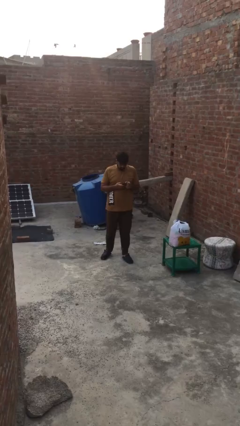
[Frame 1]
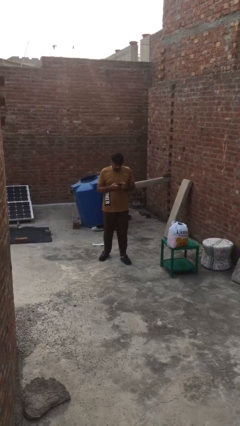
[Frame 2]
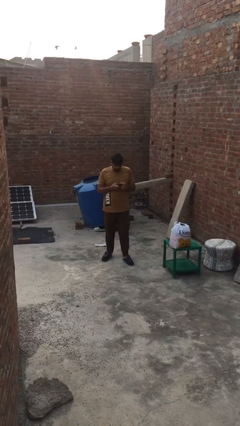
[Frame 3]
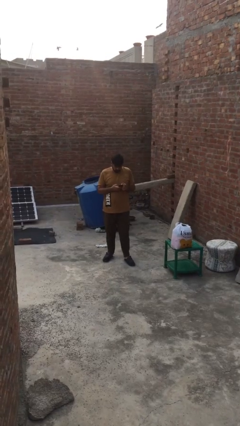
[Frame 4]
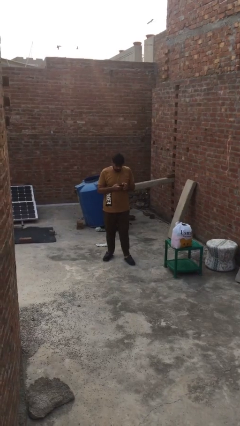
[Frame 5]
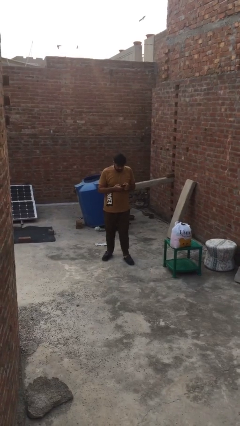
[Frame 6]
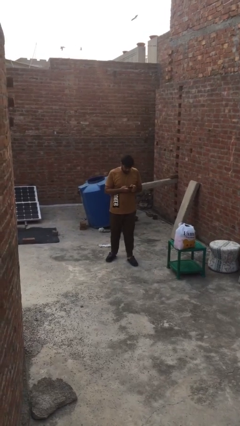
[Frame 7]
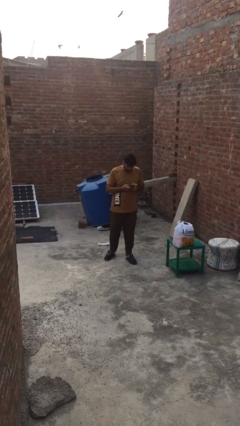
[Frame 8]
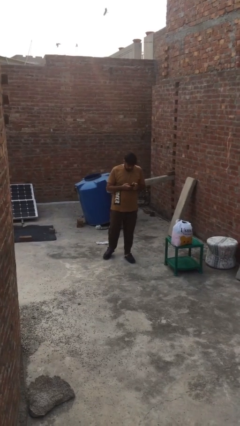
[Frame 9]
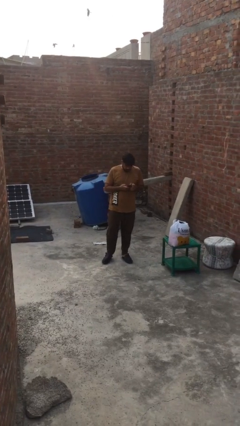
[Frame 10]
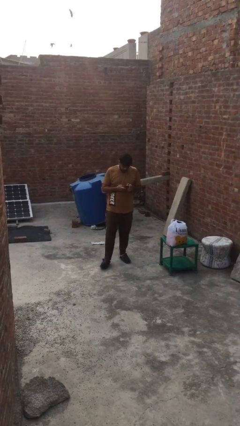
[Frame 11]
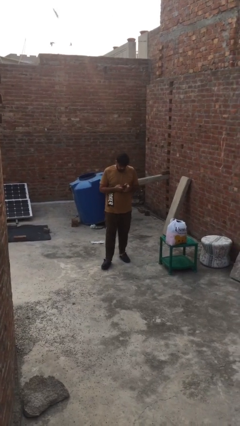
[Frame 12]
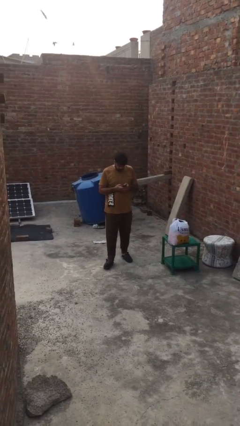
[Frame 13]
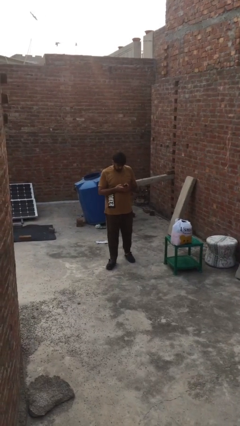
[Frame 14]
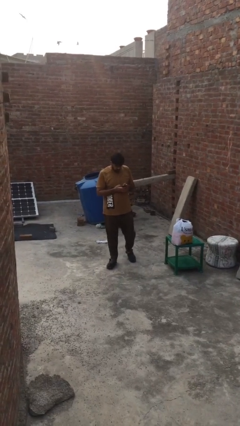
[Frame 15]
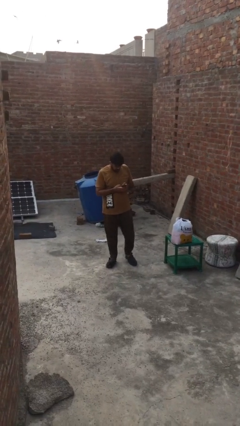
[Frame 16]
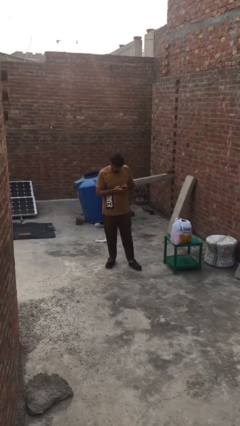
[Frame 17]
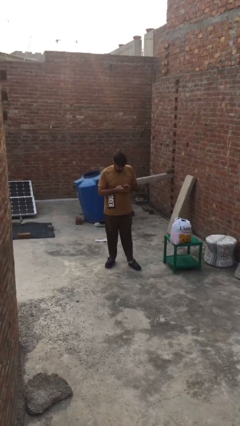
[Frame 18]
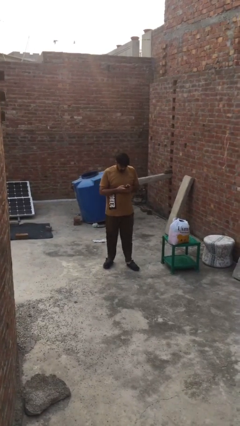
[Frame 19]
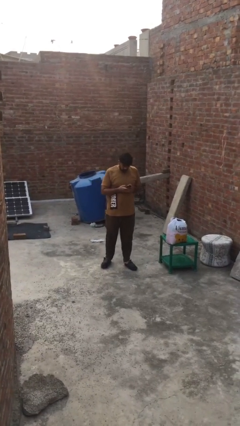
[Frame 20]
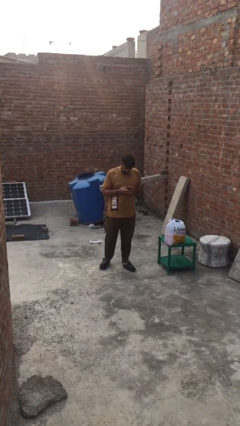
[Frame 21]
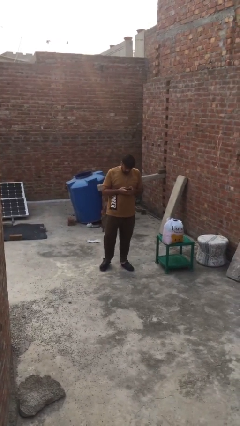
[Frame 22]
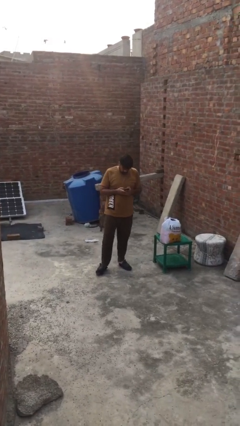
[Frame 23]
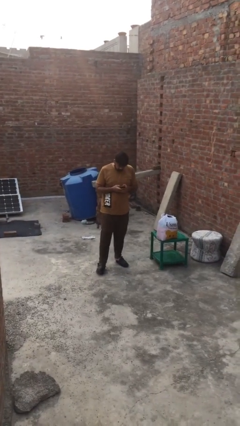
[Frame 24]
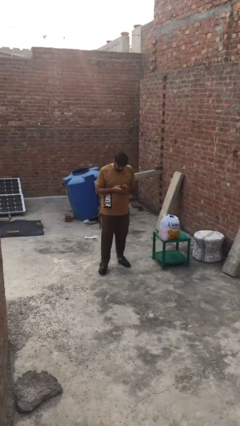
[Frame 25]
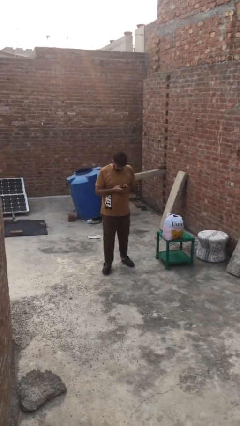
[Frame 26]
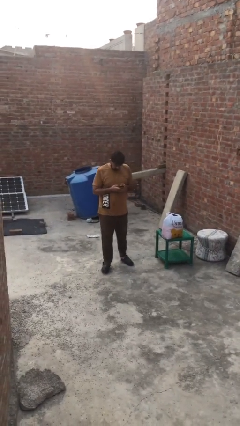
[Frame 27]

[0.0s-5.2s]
person texts on phone

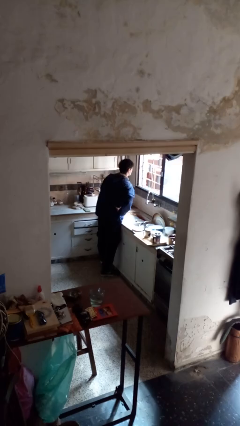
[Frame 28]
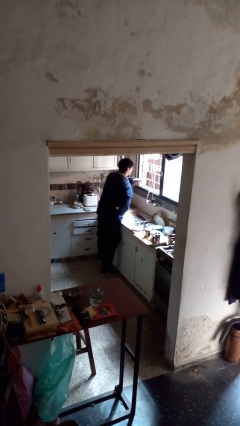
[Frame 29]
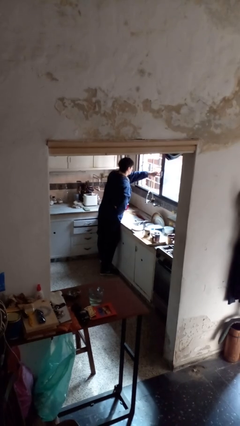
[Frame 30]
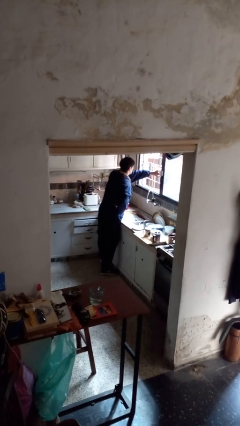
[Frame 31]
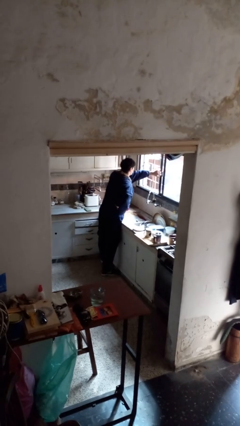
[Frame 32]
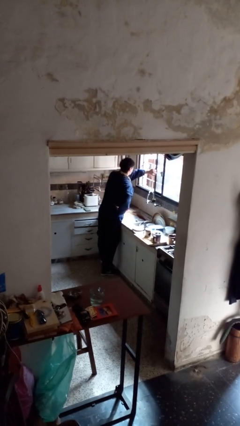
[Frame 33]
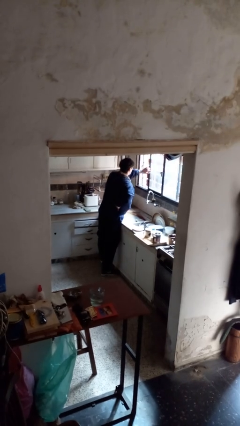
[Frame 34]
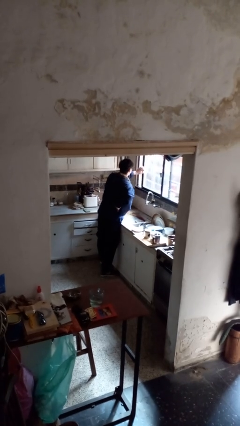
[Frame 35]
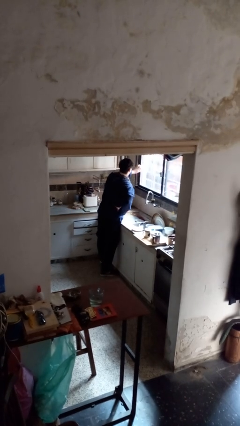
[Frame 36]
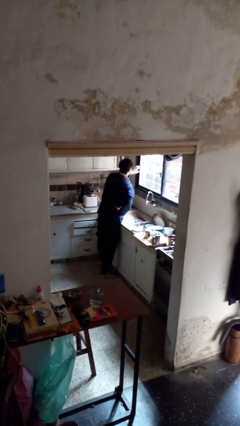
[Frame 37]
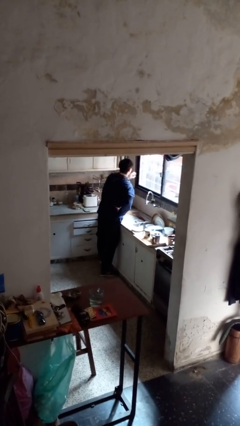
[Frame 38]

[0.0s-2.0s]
person closes home window

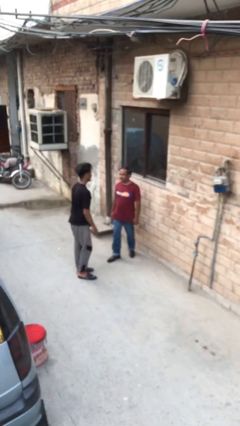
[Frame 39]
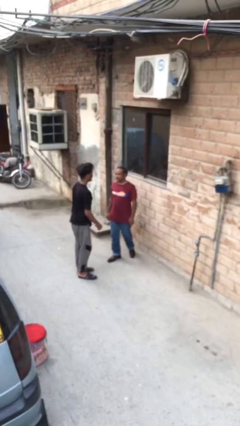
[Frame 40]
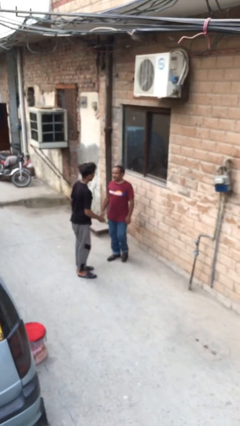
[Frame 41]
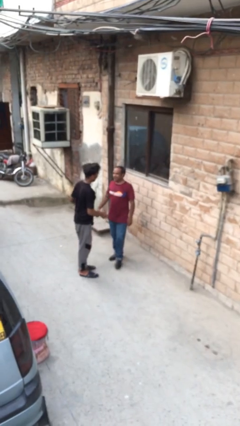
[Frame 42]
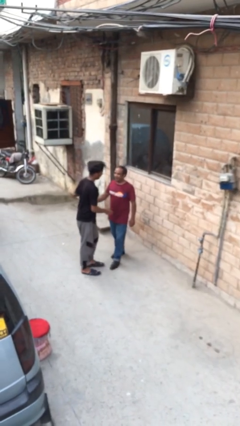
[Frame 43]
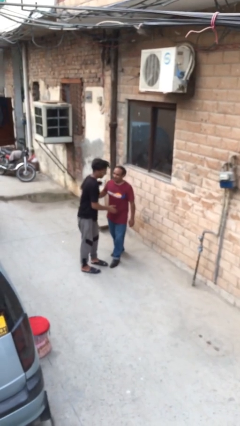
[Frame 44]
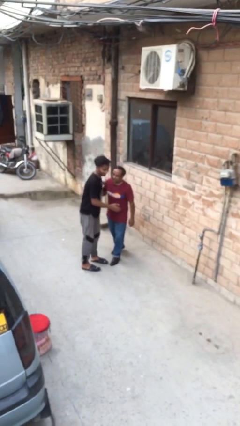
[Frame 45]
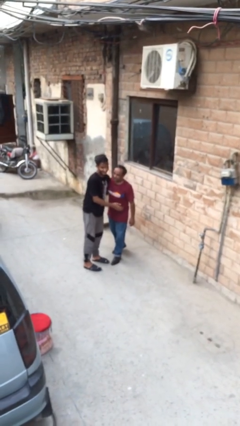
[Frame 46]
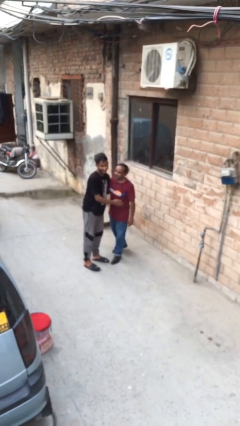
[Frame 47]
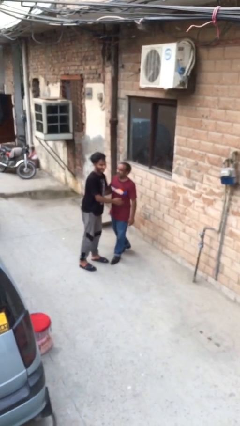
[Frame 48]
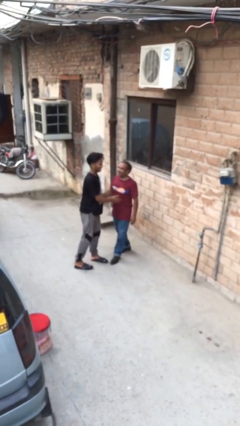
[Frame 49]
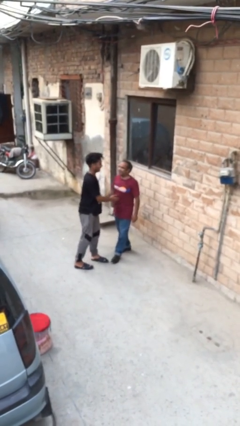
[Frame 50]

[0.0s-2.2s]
person embraces person

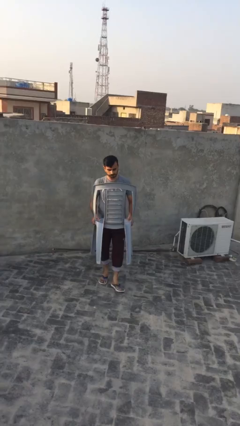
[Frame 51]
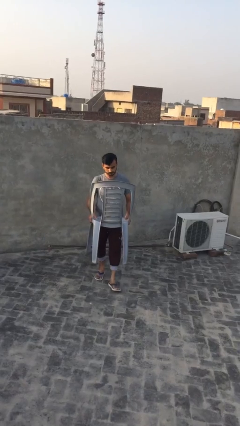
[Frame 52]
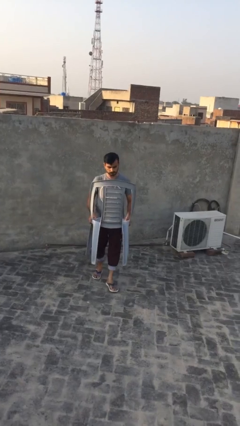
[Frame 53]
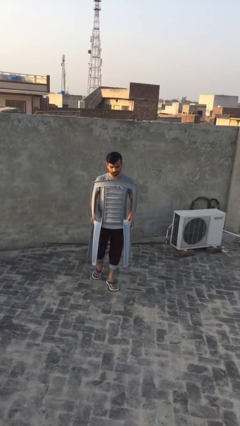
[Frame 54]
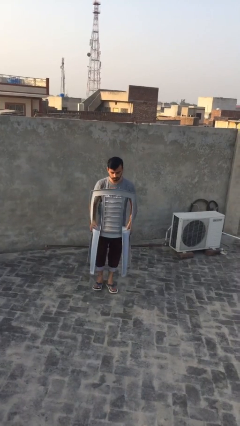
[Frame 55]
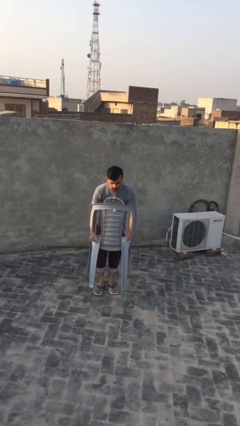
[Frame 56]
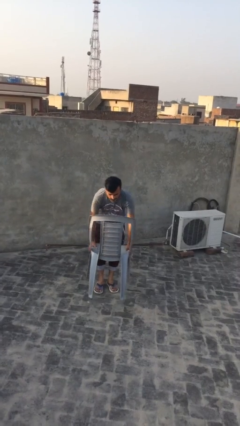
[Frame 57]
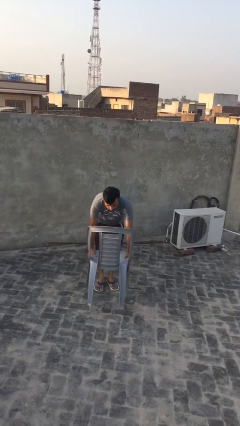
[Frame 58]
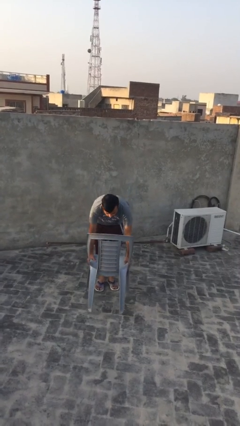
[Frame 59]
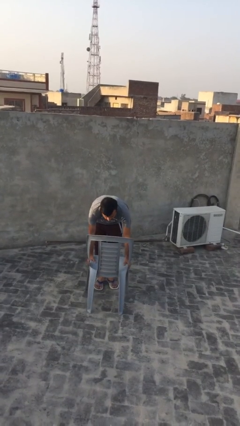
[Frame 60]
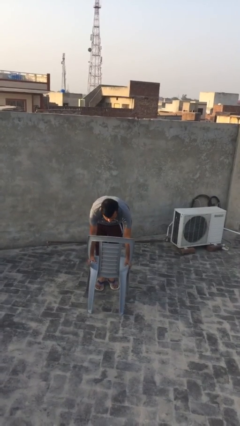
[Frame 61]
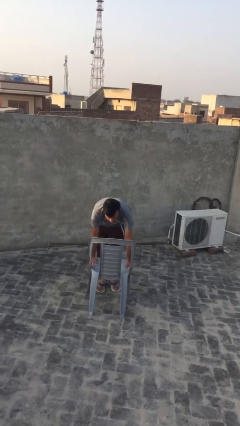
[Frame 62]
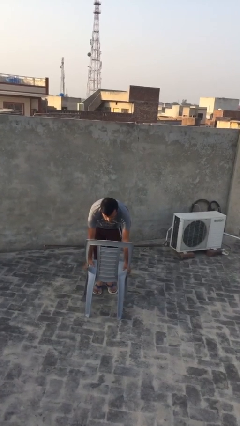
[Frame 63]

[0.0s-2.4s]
person puts down object on floor

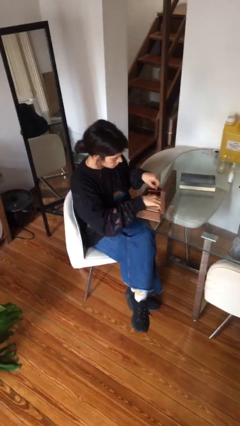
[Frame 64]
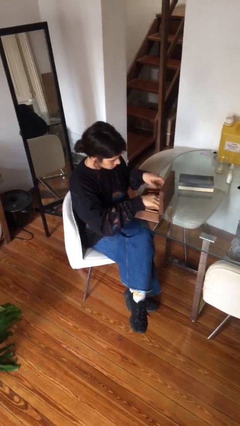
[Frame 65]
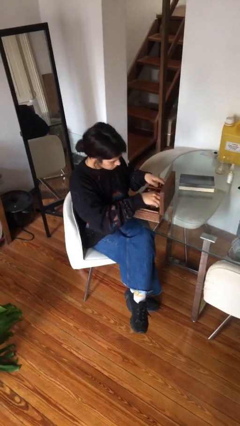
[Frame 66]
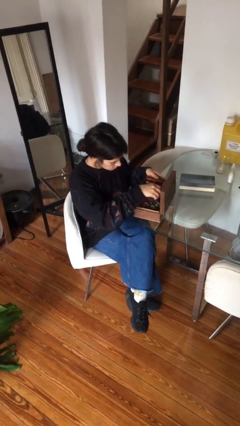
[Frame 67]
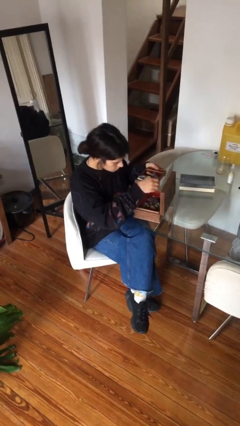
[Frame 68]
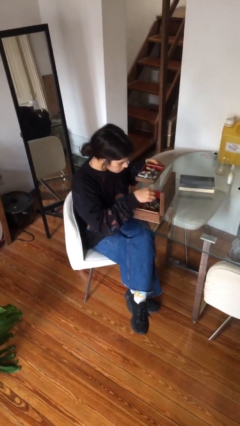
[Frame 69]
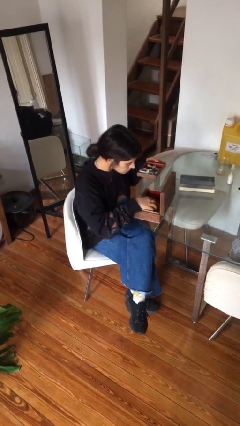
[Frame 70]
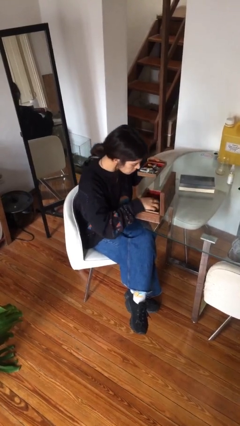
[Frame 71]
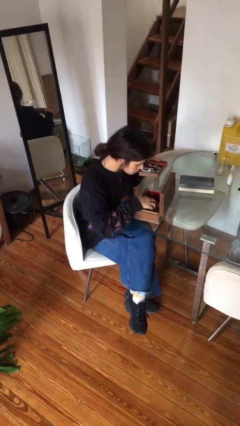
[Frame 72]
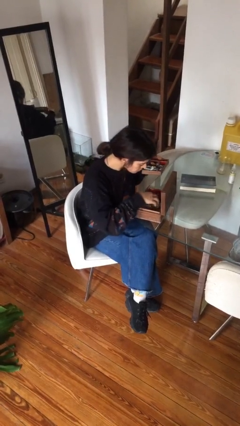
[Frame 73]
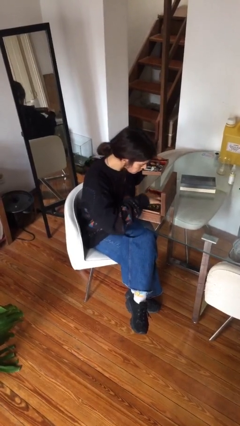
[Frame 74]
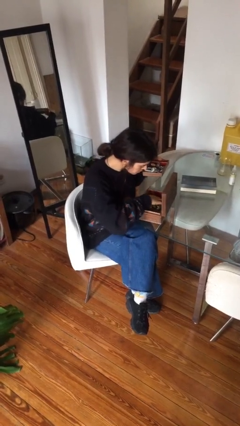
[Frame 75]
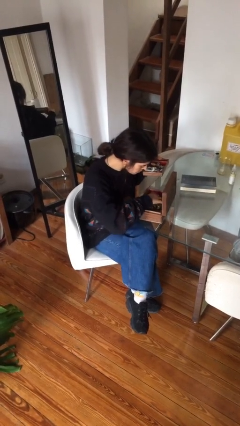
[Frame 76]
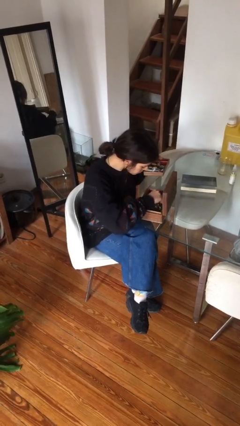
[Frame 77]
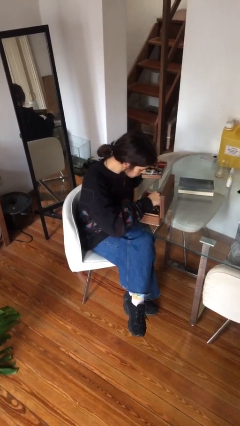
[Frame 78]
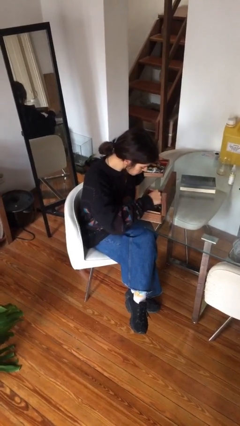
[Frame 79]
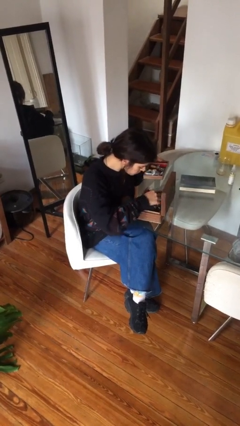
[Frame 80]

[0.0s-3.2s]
person searches jewelry box

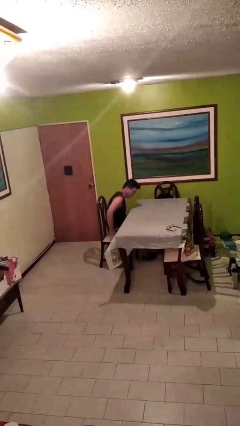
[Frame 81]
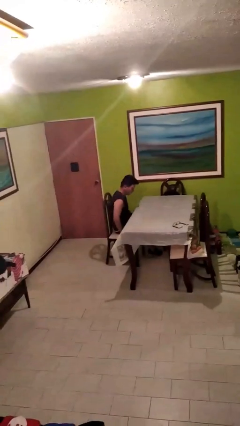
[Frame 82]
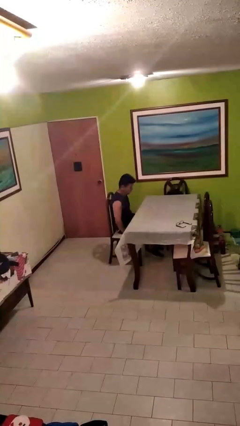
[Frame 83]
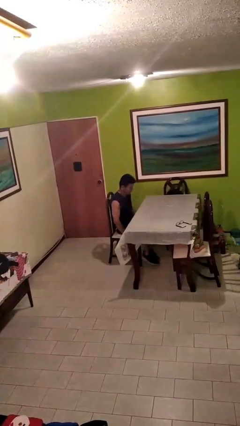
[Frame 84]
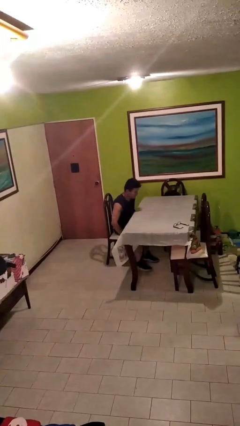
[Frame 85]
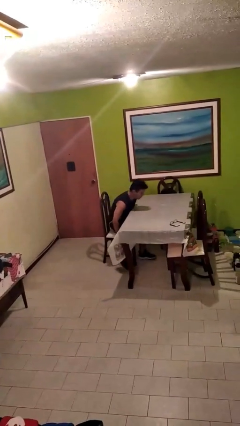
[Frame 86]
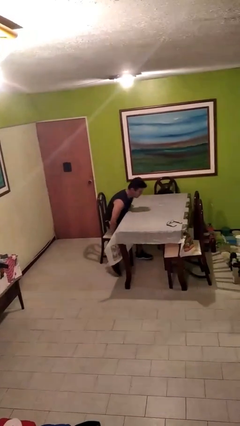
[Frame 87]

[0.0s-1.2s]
person sits down

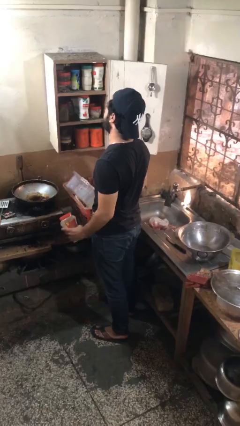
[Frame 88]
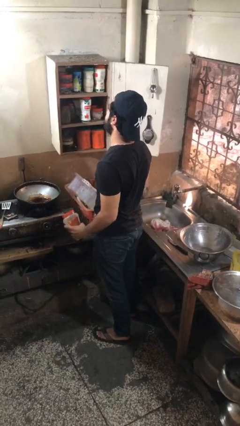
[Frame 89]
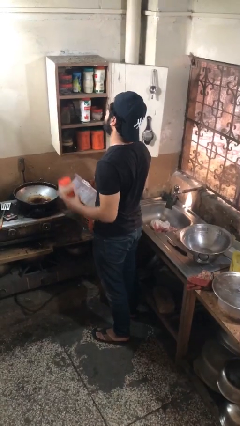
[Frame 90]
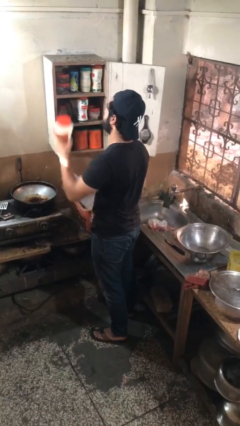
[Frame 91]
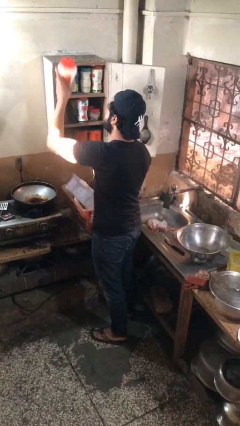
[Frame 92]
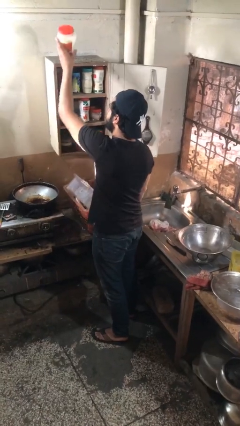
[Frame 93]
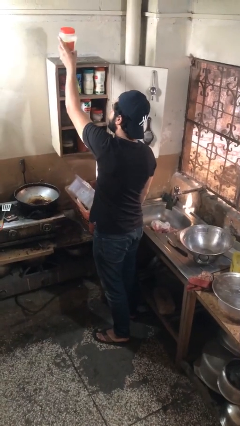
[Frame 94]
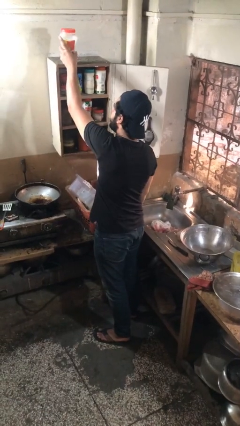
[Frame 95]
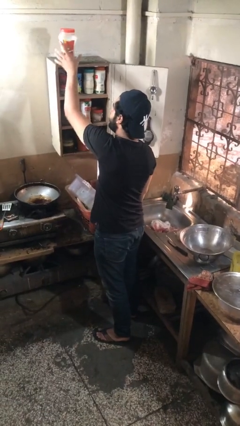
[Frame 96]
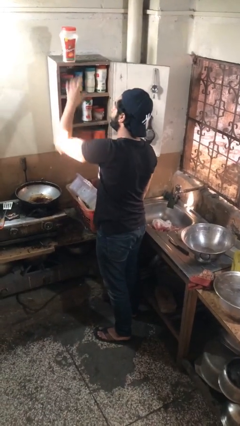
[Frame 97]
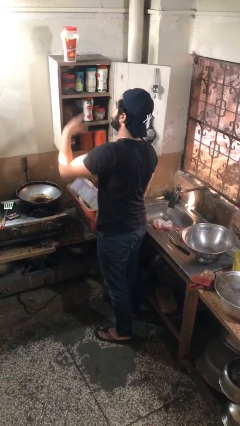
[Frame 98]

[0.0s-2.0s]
person puts object in cabinet
